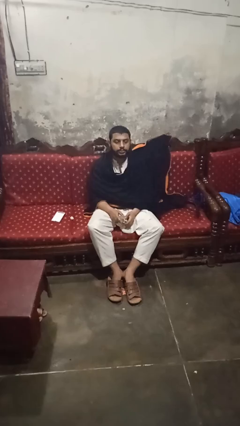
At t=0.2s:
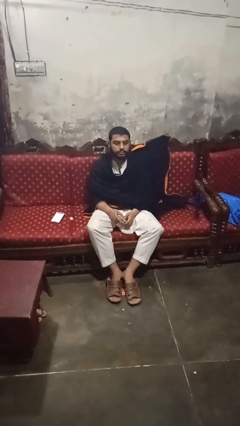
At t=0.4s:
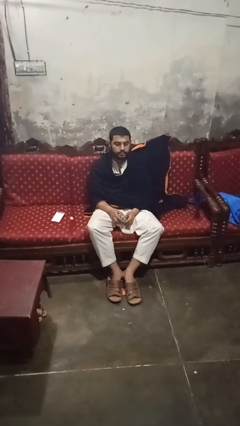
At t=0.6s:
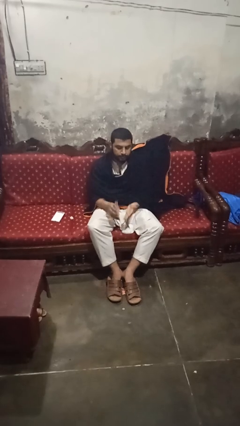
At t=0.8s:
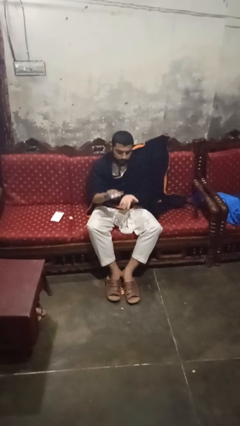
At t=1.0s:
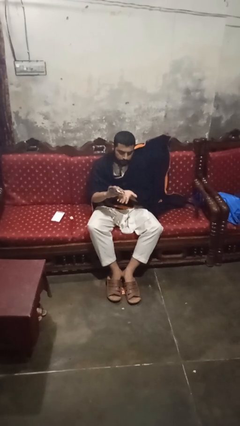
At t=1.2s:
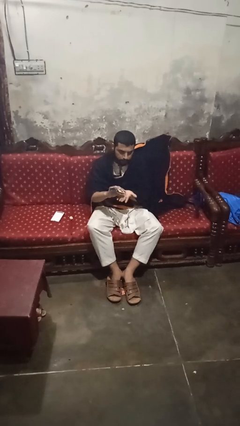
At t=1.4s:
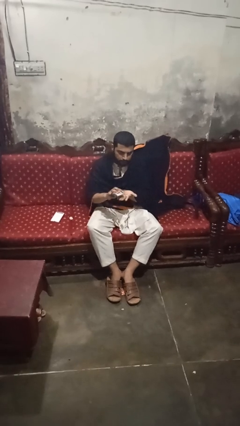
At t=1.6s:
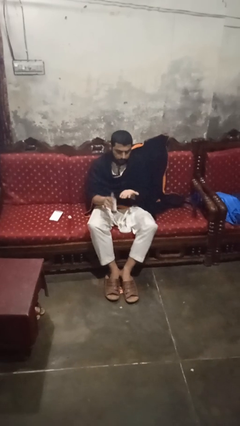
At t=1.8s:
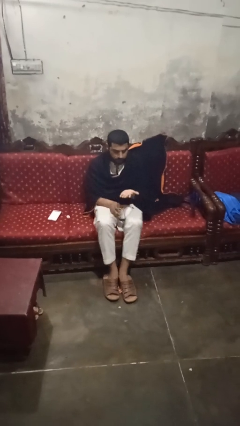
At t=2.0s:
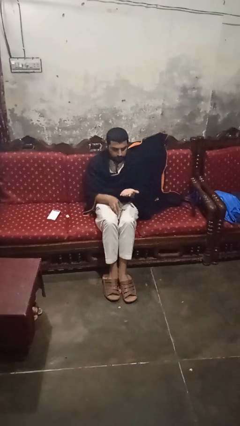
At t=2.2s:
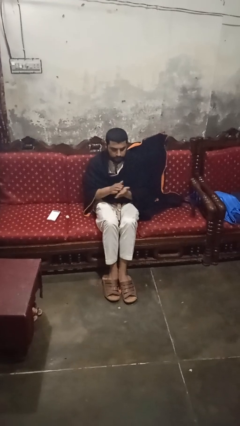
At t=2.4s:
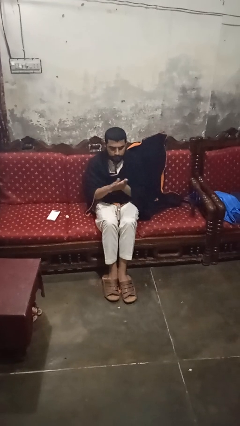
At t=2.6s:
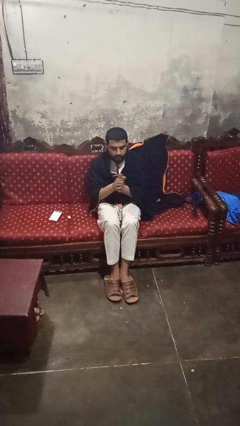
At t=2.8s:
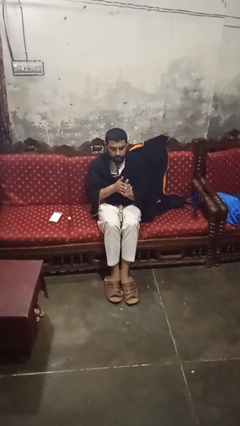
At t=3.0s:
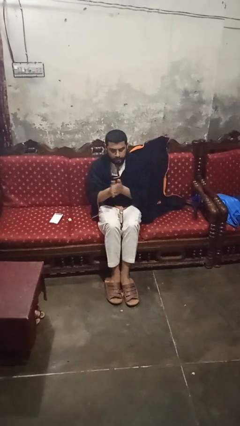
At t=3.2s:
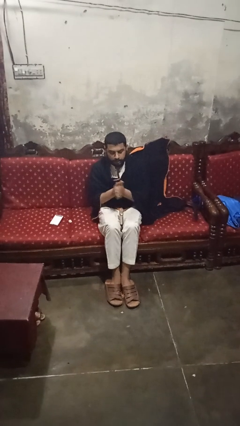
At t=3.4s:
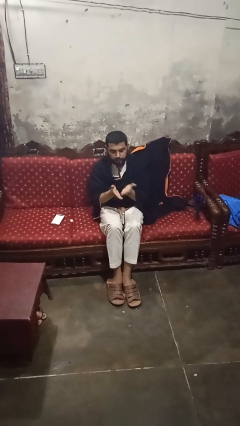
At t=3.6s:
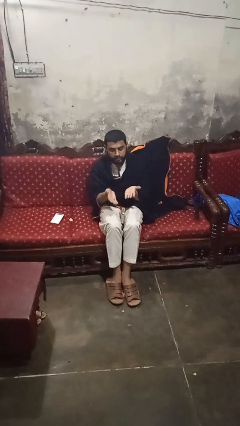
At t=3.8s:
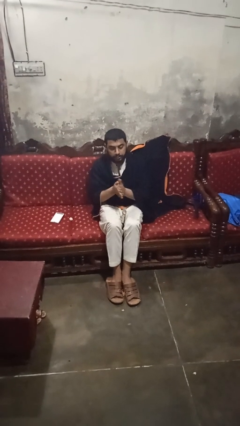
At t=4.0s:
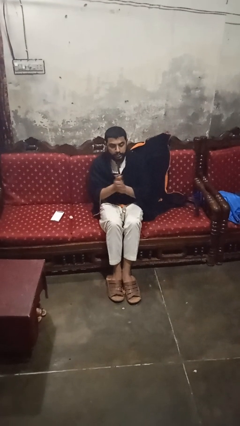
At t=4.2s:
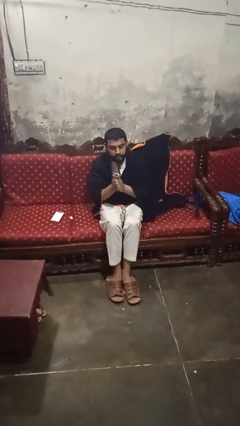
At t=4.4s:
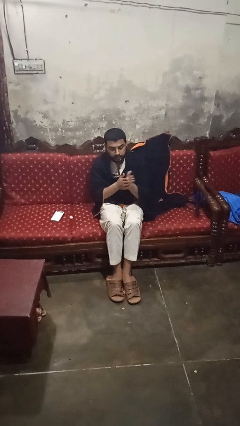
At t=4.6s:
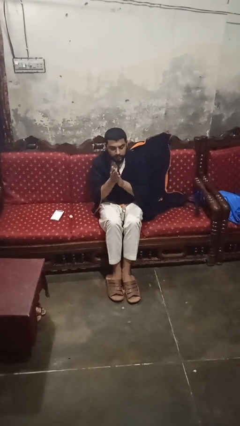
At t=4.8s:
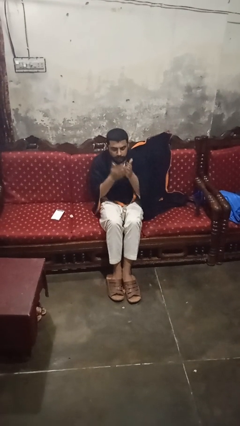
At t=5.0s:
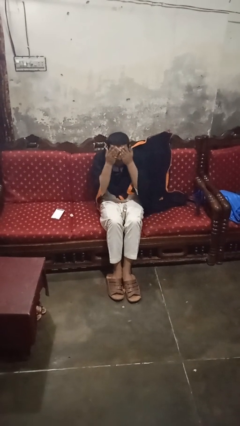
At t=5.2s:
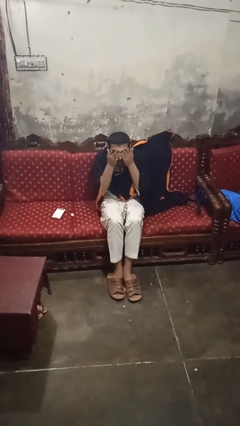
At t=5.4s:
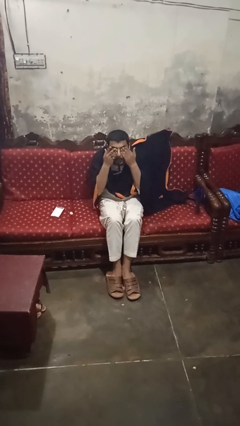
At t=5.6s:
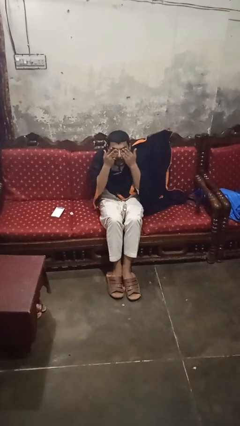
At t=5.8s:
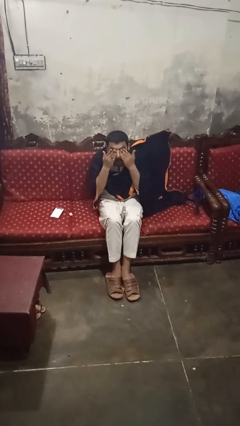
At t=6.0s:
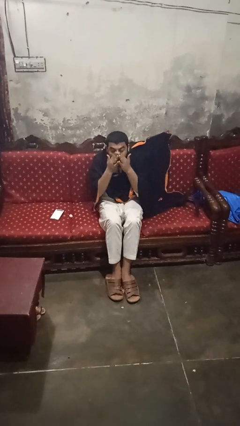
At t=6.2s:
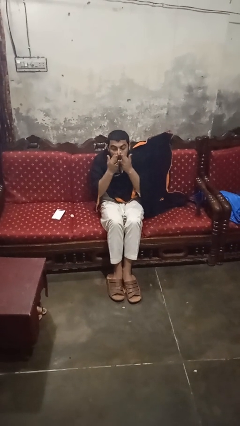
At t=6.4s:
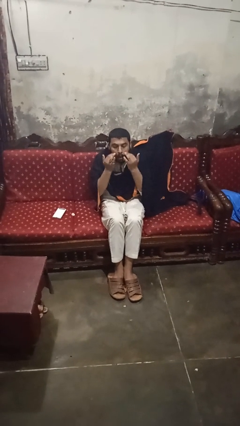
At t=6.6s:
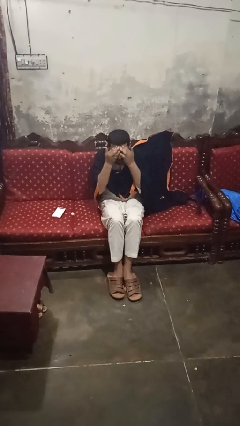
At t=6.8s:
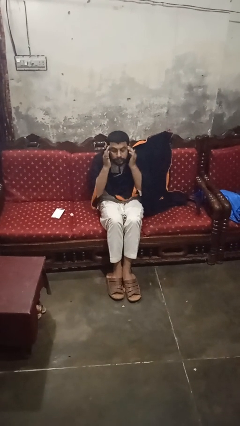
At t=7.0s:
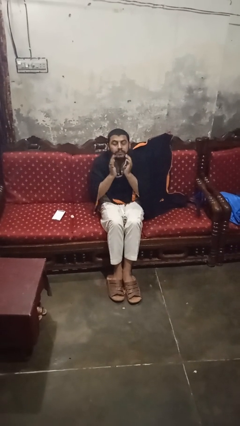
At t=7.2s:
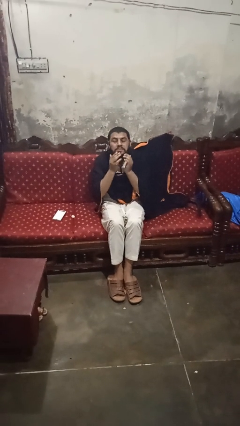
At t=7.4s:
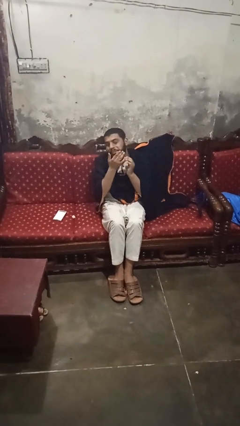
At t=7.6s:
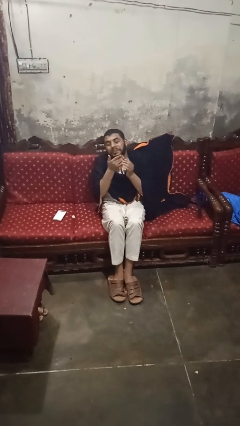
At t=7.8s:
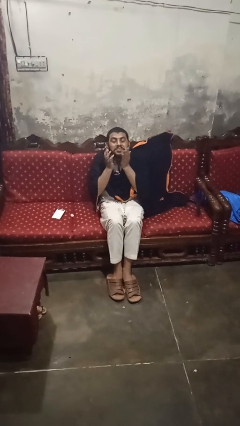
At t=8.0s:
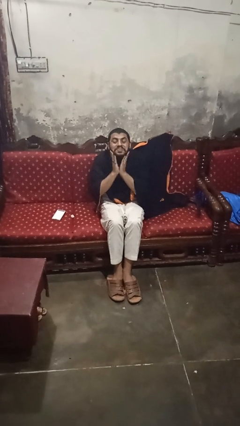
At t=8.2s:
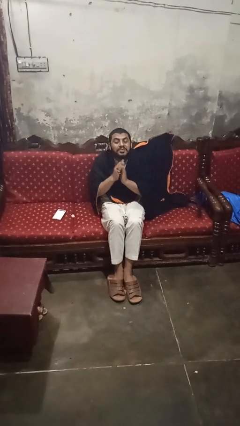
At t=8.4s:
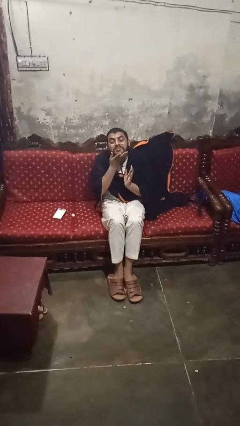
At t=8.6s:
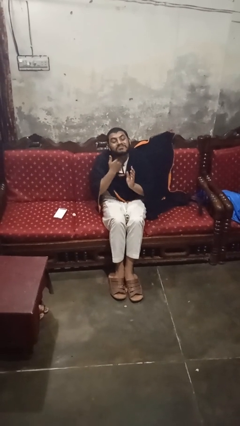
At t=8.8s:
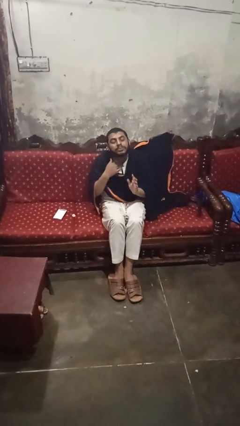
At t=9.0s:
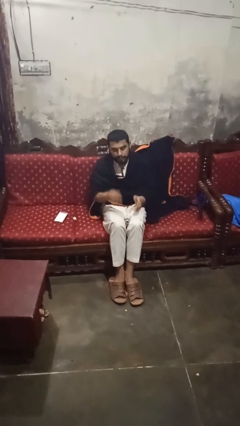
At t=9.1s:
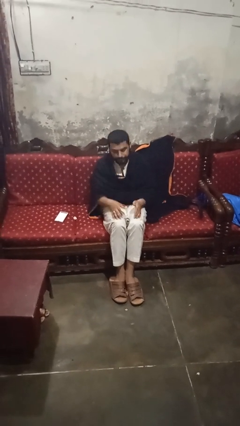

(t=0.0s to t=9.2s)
person applies facial moisturizer

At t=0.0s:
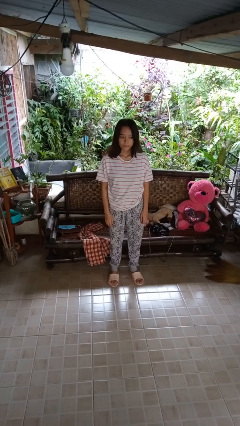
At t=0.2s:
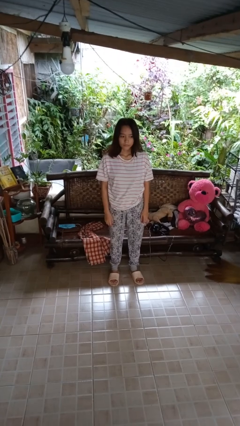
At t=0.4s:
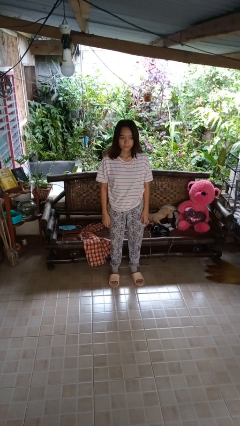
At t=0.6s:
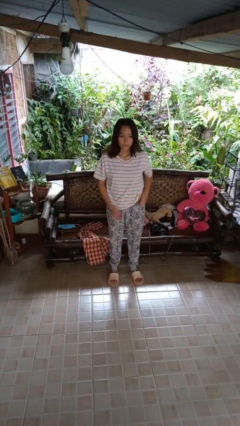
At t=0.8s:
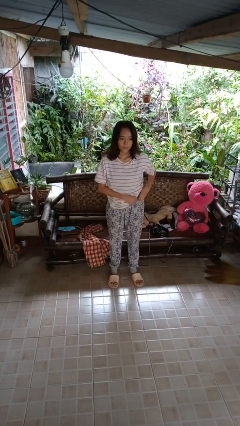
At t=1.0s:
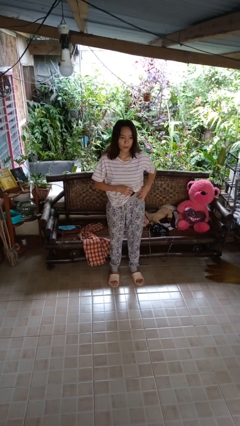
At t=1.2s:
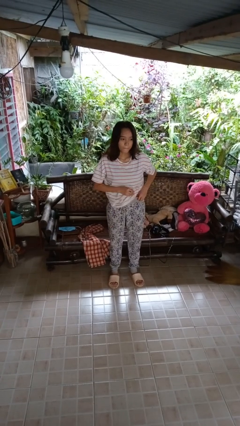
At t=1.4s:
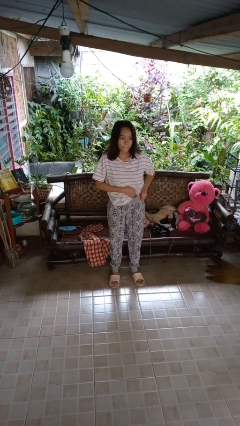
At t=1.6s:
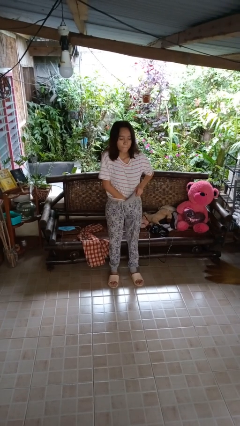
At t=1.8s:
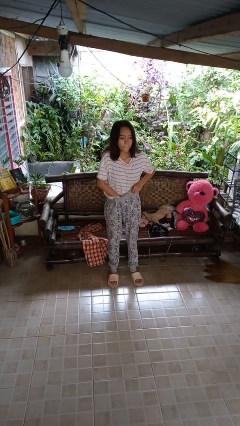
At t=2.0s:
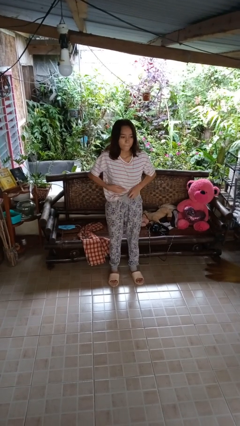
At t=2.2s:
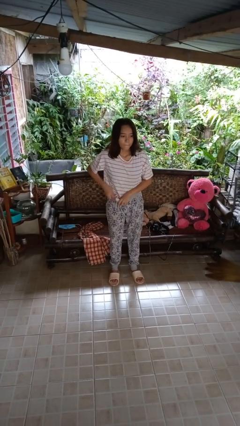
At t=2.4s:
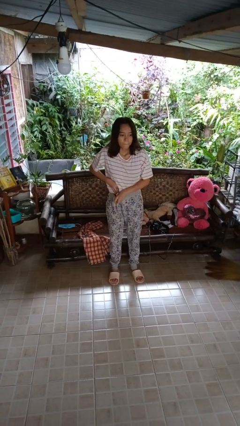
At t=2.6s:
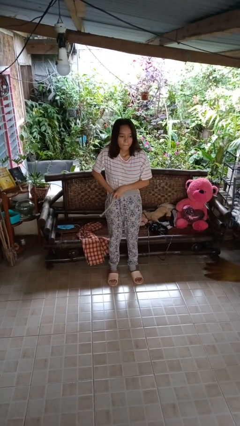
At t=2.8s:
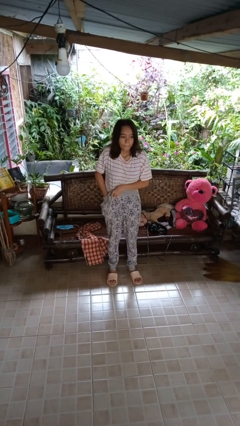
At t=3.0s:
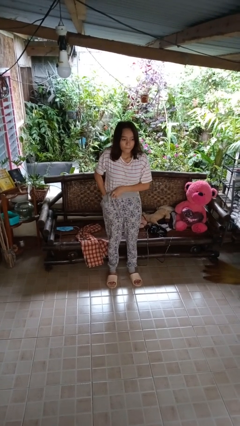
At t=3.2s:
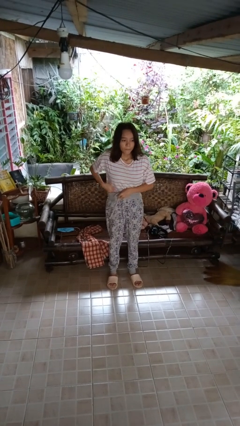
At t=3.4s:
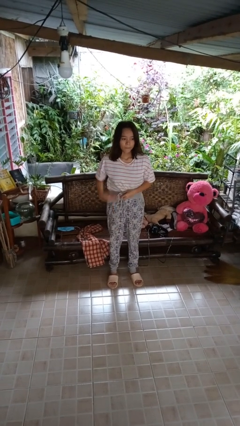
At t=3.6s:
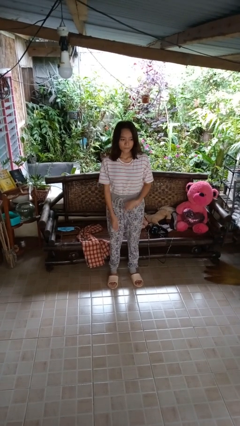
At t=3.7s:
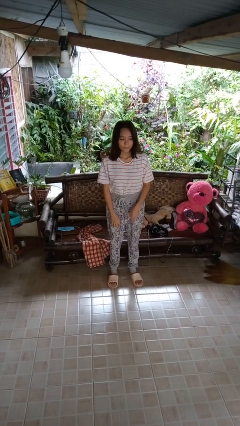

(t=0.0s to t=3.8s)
person tucks in shirt

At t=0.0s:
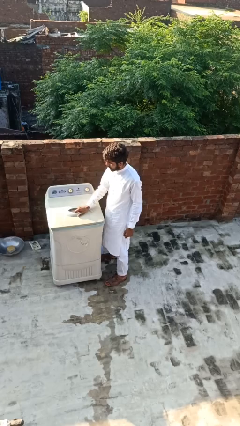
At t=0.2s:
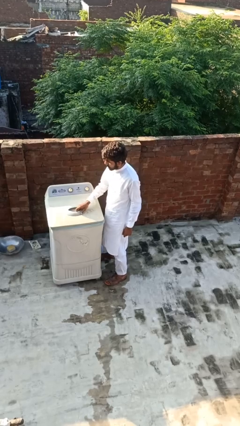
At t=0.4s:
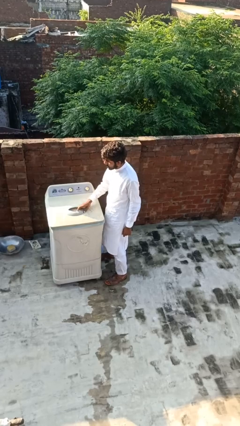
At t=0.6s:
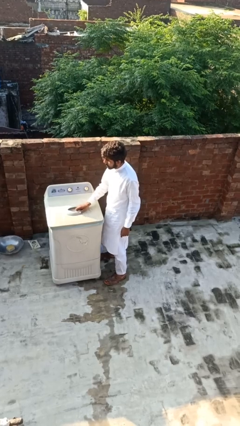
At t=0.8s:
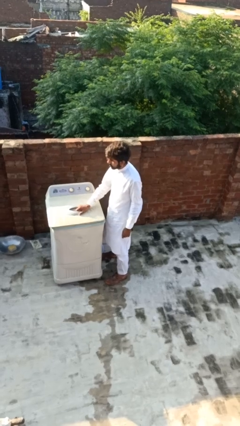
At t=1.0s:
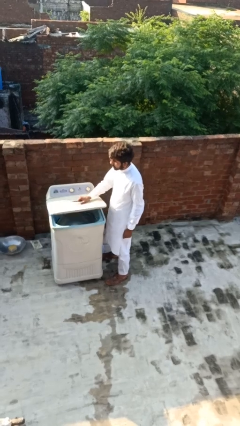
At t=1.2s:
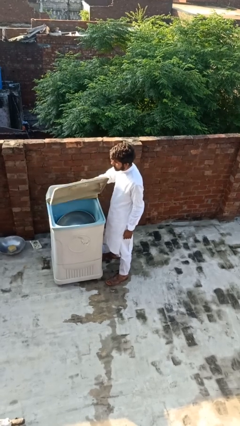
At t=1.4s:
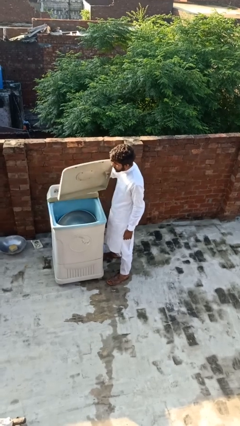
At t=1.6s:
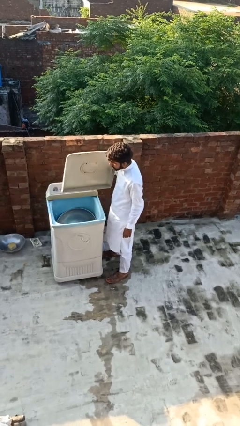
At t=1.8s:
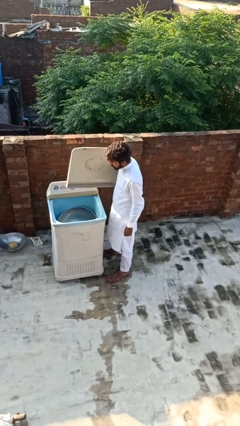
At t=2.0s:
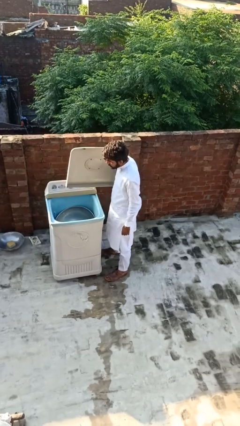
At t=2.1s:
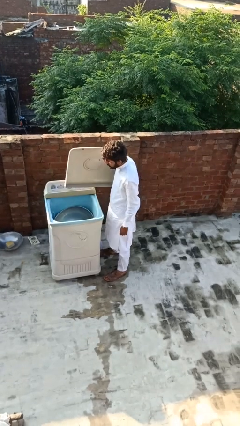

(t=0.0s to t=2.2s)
person opens clothes washer

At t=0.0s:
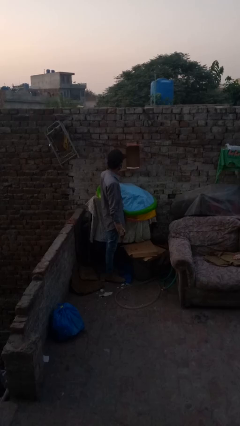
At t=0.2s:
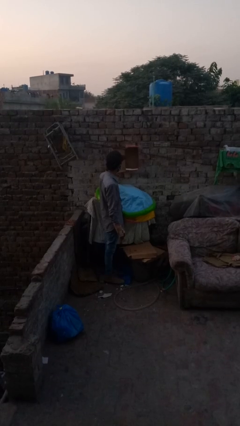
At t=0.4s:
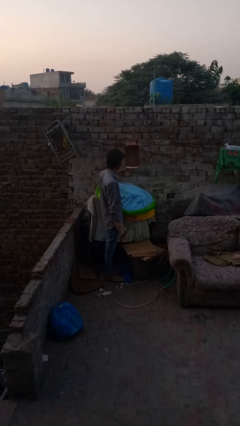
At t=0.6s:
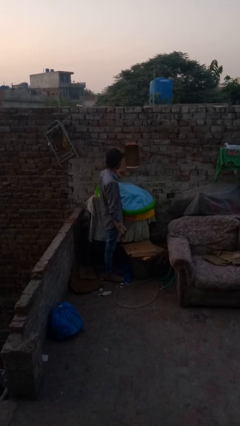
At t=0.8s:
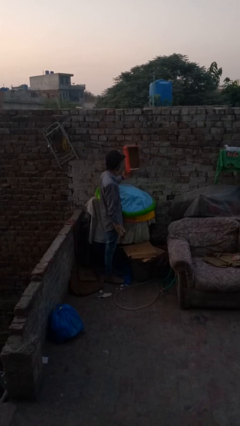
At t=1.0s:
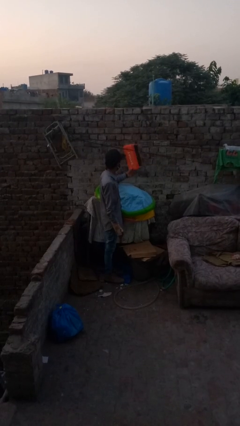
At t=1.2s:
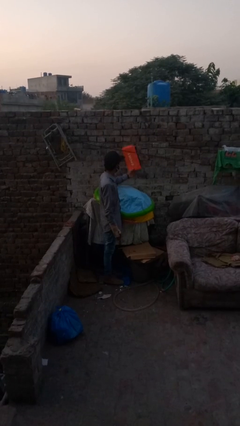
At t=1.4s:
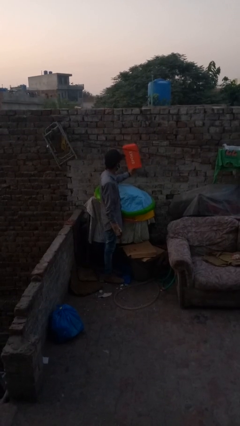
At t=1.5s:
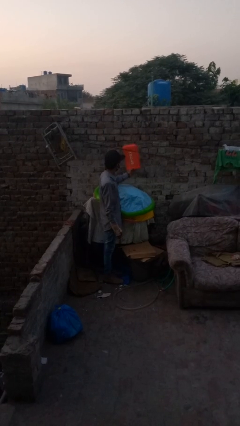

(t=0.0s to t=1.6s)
person closes mailbox

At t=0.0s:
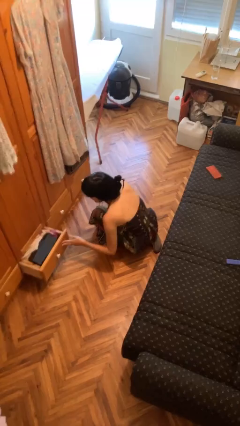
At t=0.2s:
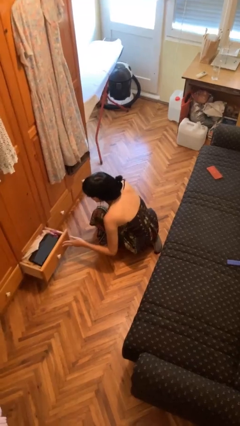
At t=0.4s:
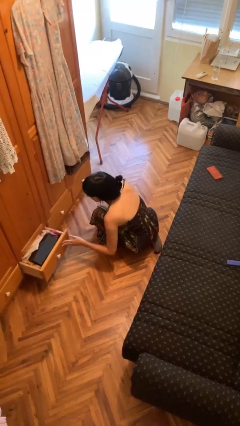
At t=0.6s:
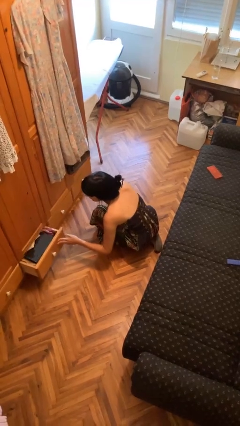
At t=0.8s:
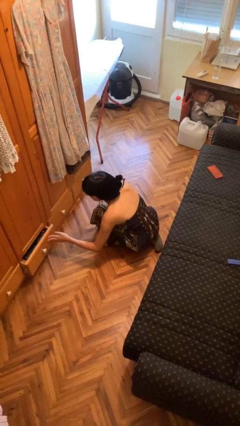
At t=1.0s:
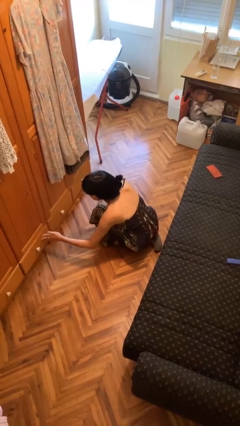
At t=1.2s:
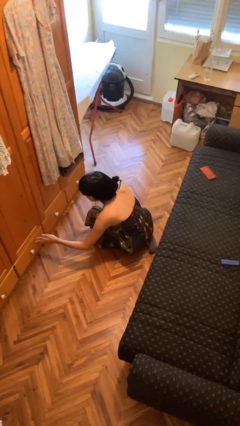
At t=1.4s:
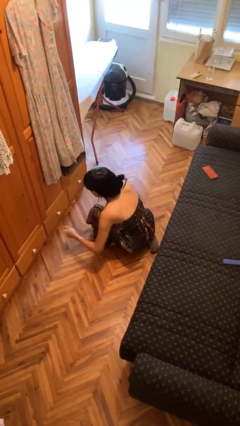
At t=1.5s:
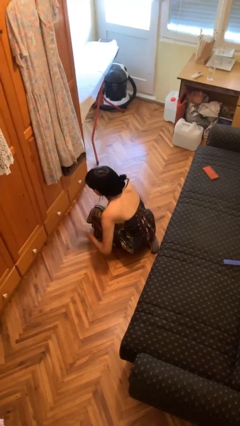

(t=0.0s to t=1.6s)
person closes dresser drawer
